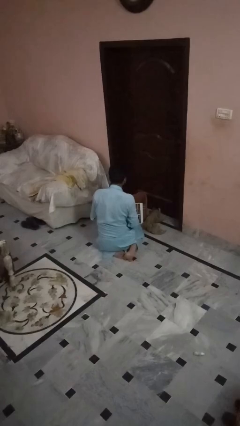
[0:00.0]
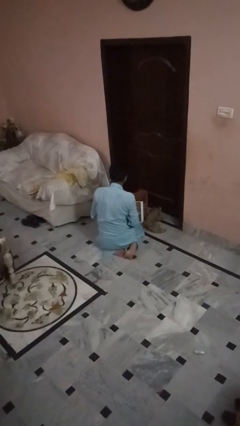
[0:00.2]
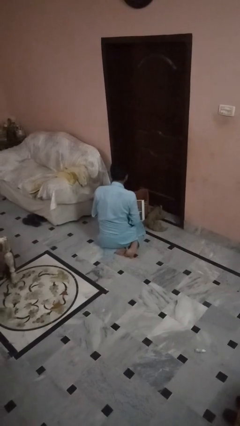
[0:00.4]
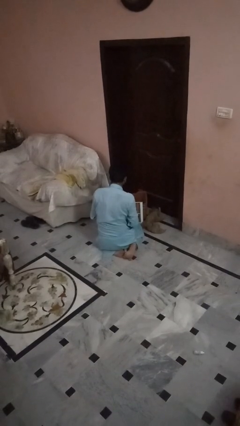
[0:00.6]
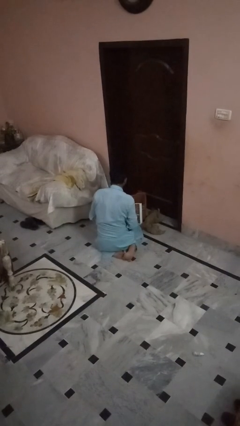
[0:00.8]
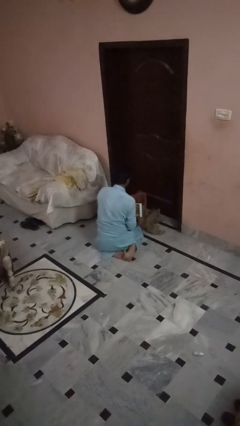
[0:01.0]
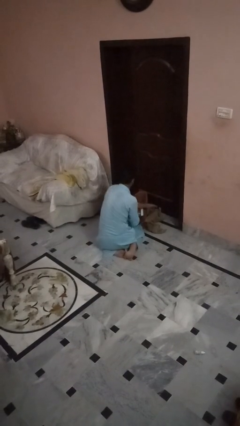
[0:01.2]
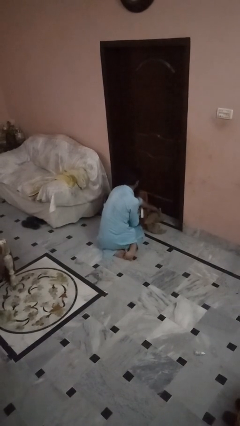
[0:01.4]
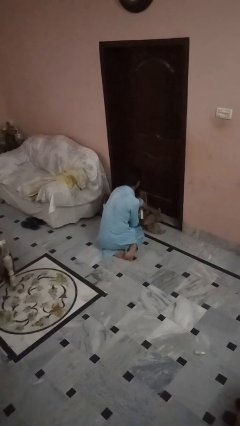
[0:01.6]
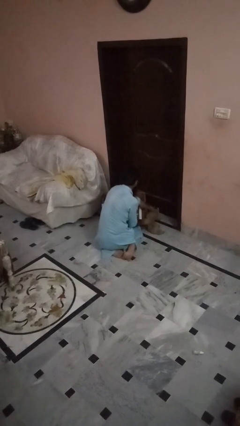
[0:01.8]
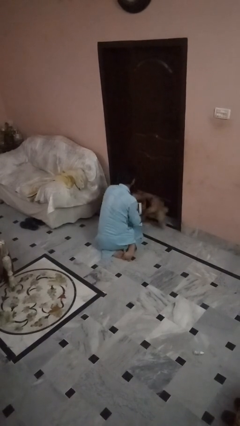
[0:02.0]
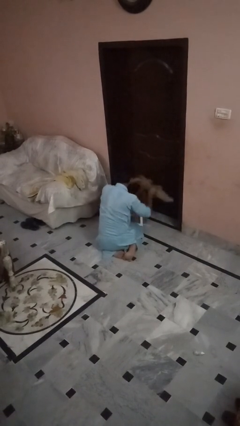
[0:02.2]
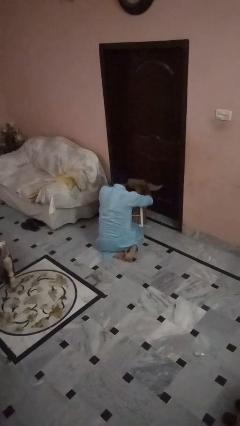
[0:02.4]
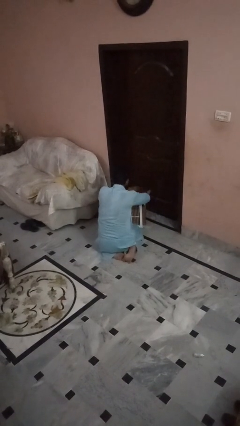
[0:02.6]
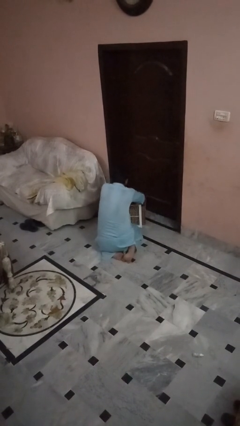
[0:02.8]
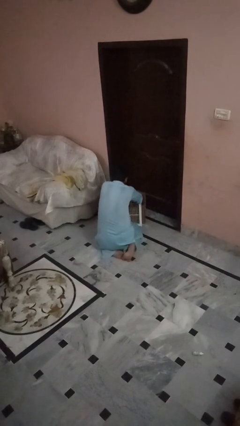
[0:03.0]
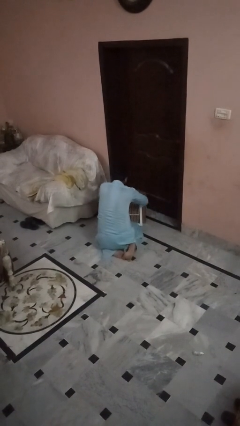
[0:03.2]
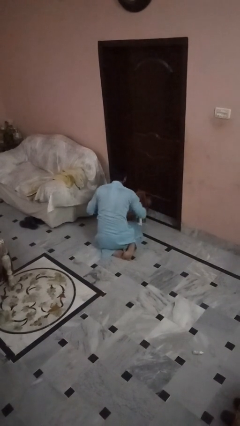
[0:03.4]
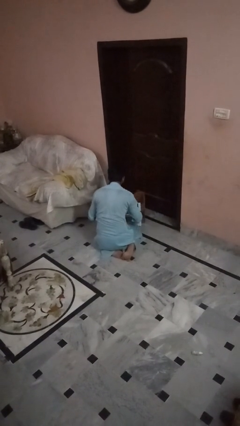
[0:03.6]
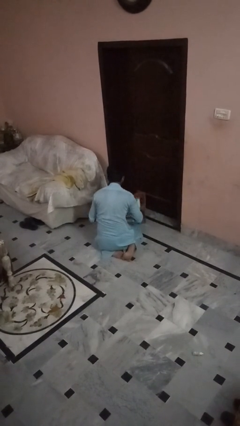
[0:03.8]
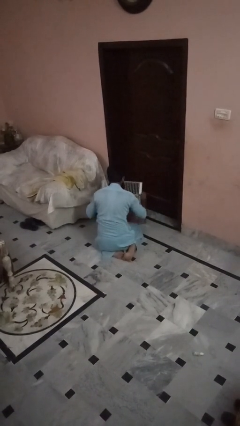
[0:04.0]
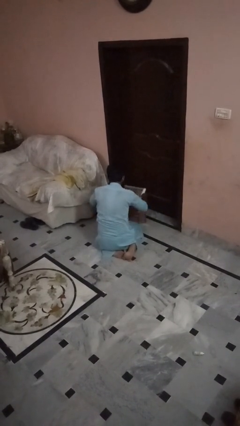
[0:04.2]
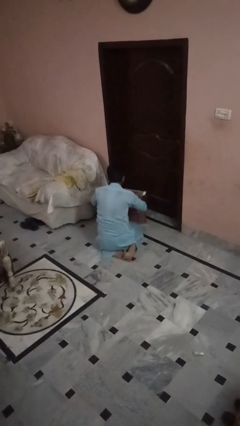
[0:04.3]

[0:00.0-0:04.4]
person crates dog

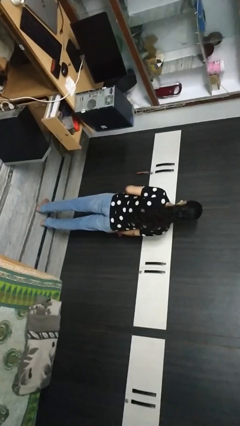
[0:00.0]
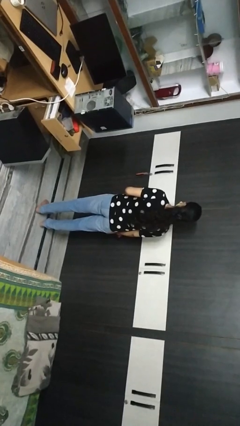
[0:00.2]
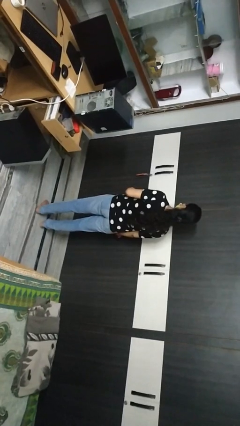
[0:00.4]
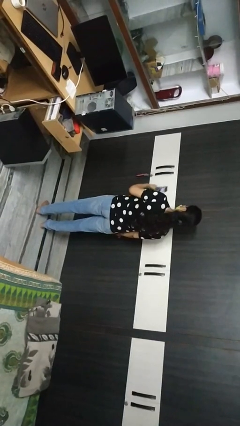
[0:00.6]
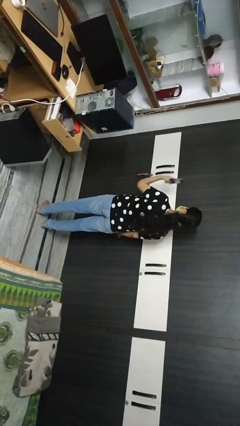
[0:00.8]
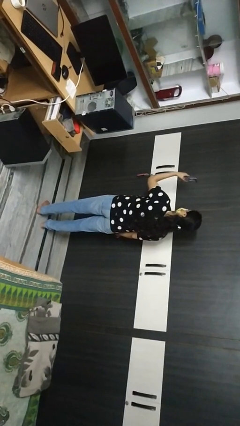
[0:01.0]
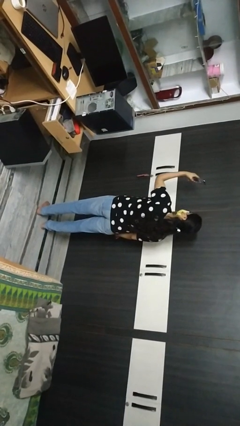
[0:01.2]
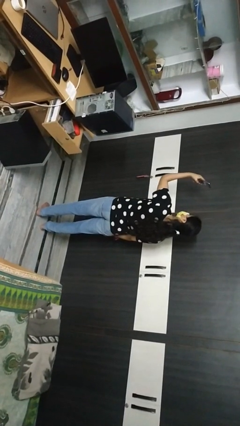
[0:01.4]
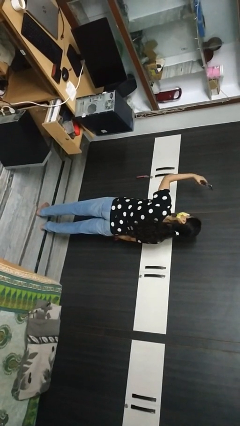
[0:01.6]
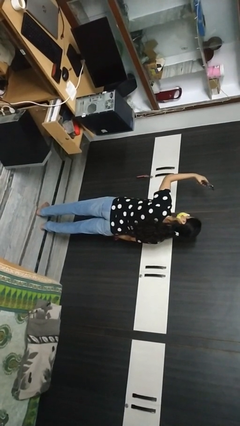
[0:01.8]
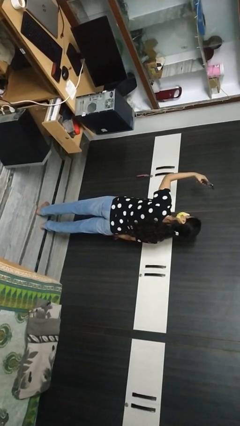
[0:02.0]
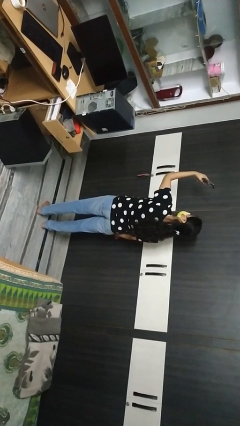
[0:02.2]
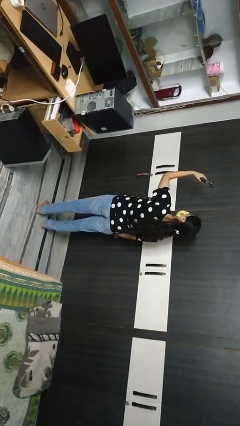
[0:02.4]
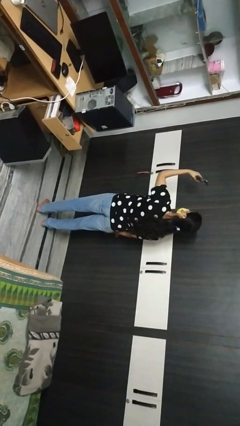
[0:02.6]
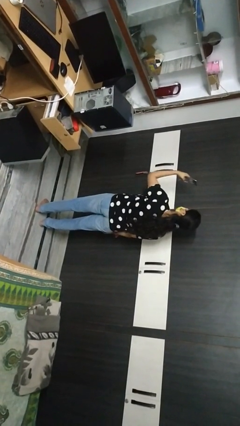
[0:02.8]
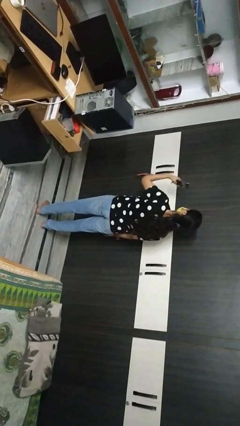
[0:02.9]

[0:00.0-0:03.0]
person takes selfie

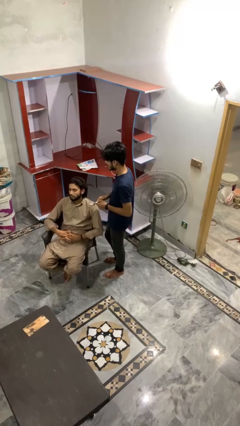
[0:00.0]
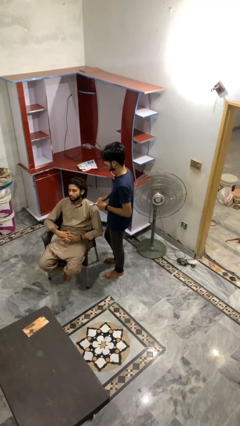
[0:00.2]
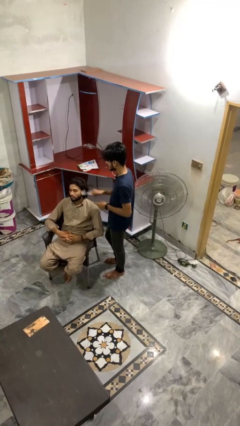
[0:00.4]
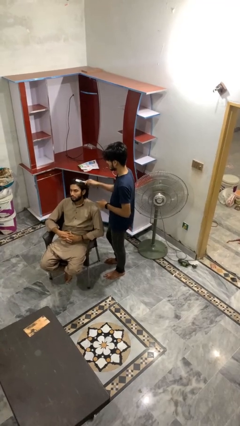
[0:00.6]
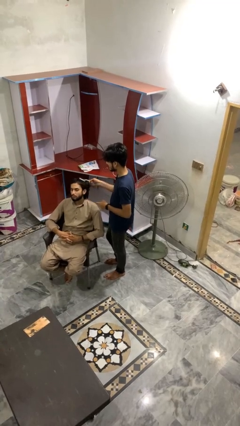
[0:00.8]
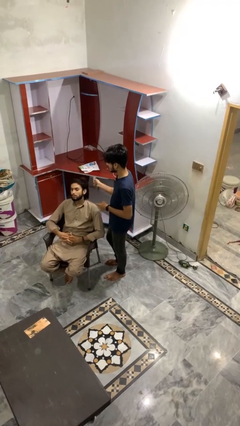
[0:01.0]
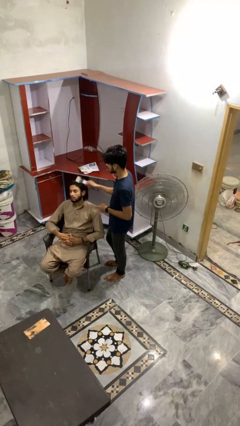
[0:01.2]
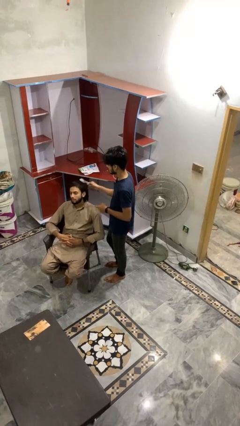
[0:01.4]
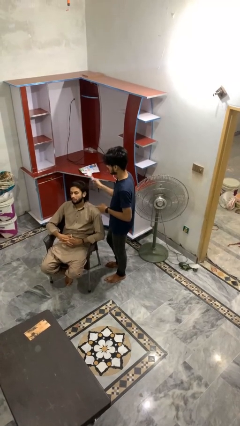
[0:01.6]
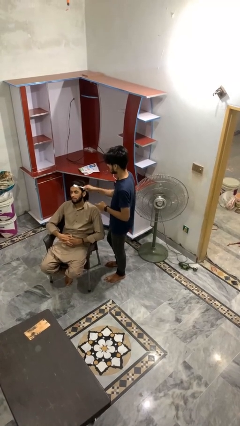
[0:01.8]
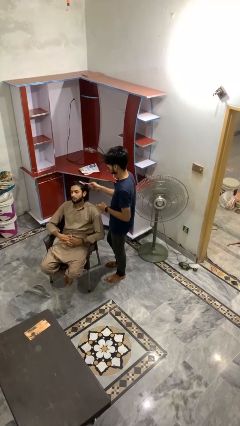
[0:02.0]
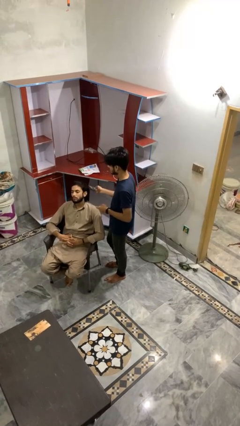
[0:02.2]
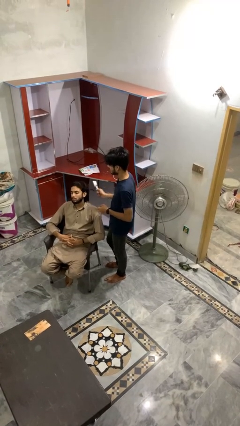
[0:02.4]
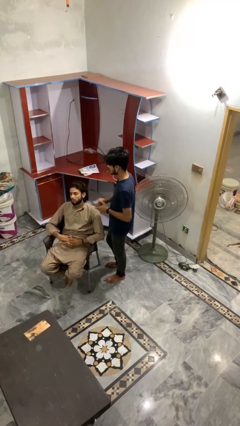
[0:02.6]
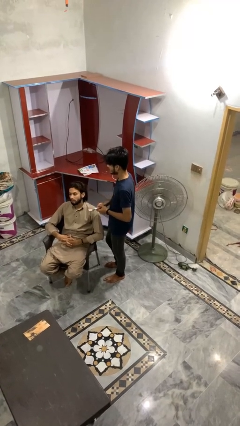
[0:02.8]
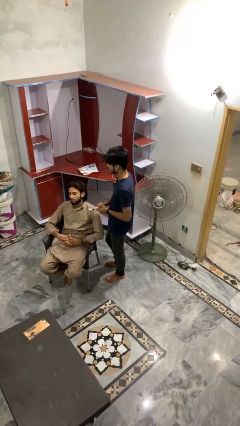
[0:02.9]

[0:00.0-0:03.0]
person brushes hair of person

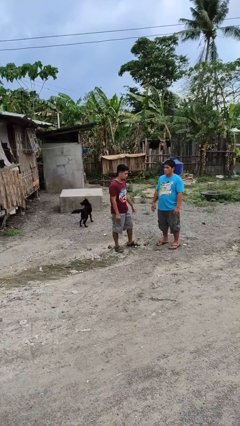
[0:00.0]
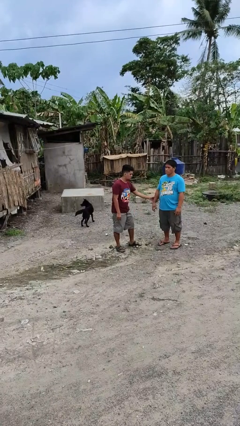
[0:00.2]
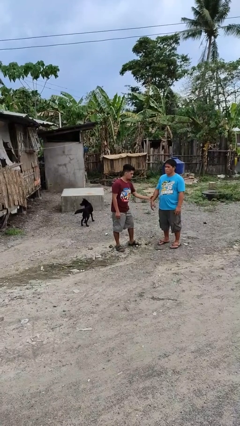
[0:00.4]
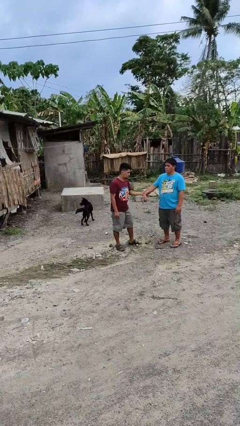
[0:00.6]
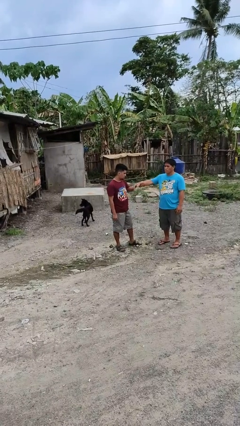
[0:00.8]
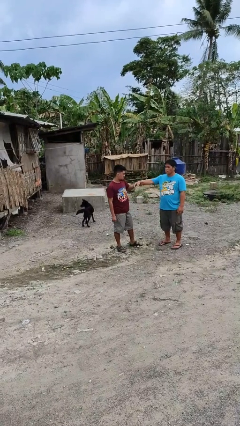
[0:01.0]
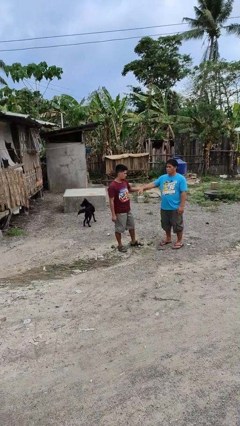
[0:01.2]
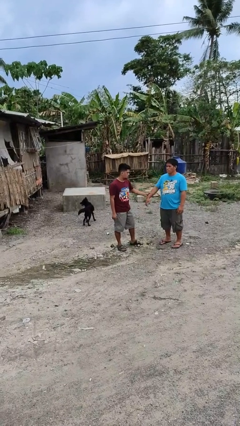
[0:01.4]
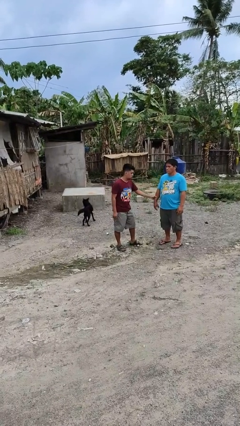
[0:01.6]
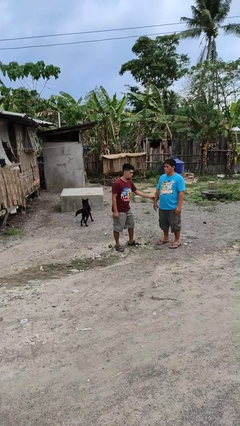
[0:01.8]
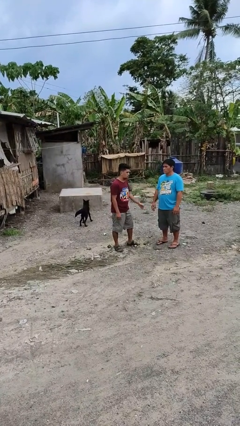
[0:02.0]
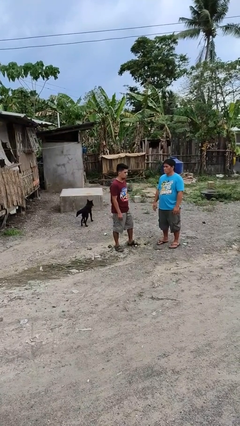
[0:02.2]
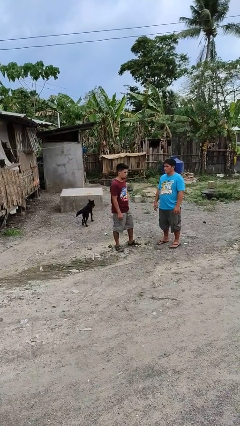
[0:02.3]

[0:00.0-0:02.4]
person grabs person by forearm

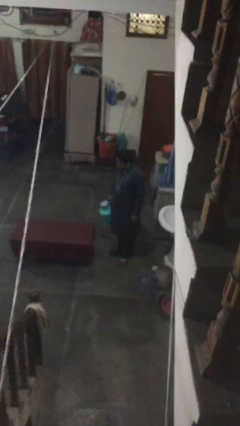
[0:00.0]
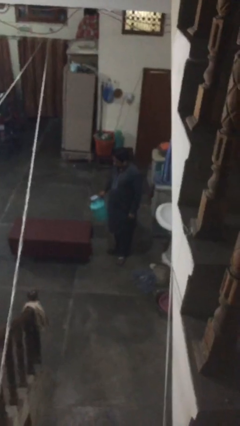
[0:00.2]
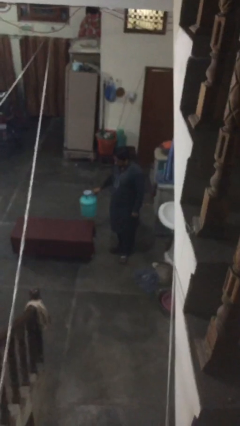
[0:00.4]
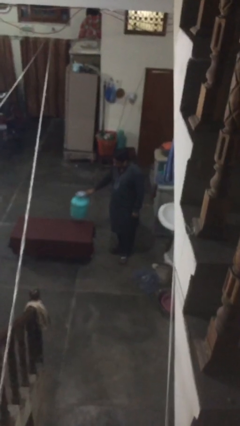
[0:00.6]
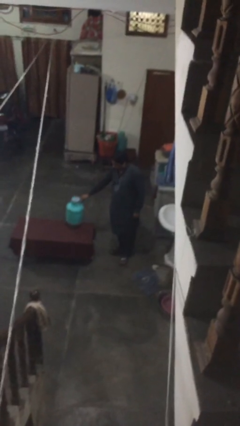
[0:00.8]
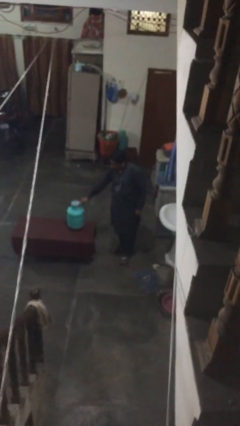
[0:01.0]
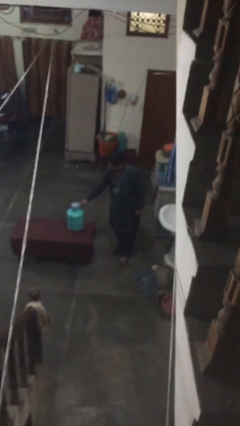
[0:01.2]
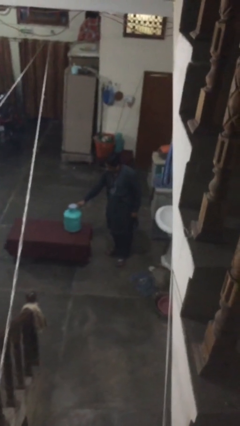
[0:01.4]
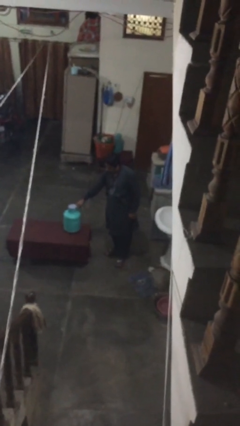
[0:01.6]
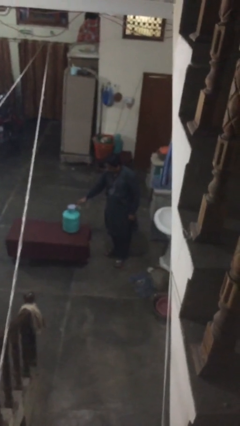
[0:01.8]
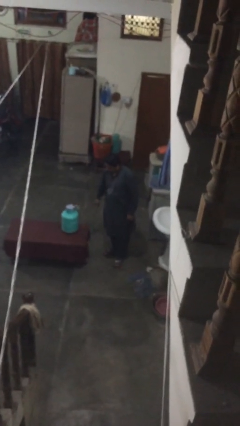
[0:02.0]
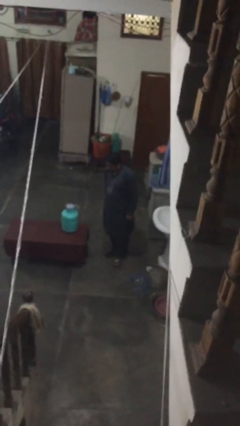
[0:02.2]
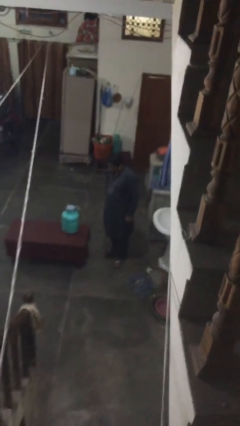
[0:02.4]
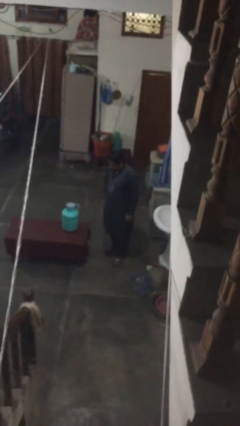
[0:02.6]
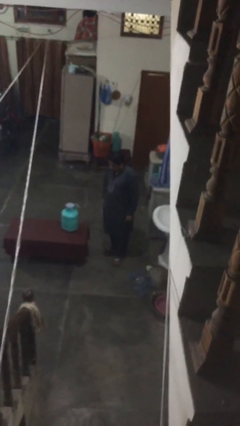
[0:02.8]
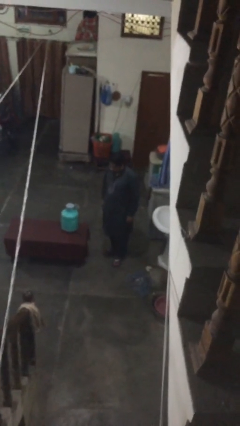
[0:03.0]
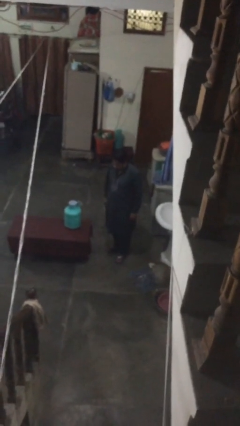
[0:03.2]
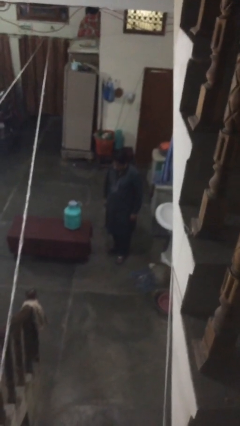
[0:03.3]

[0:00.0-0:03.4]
person puts down object on table

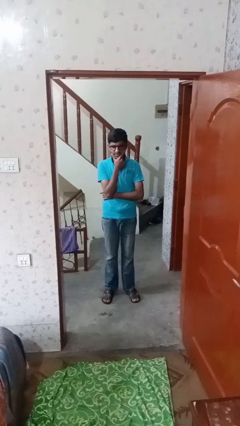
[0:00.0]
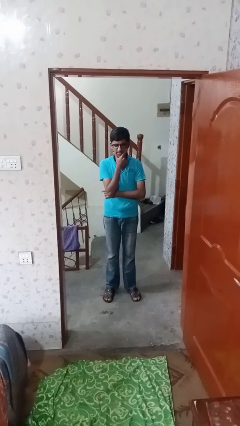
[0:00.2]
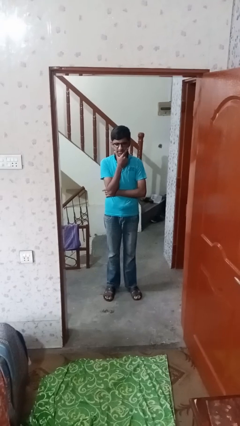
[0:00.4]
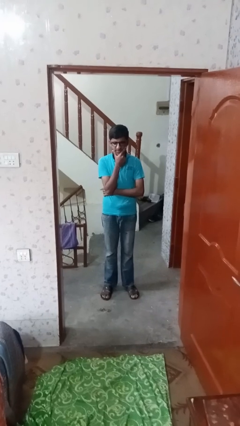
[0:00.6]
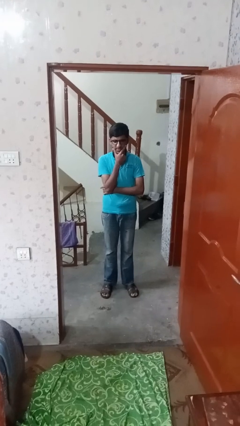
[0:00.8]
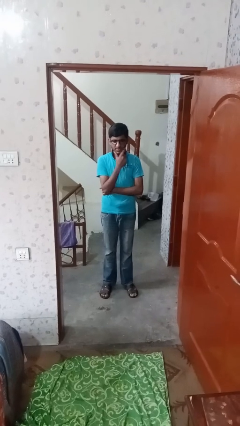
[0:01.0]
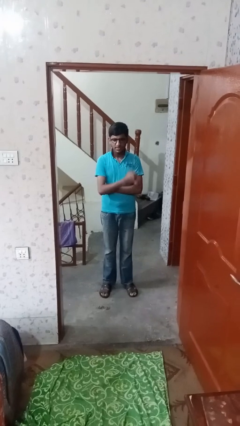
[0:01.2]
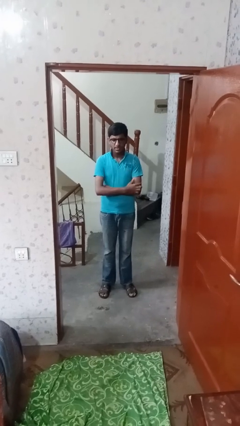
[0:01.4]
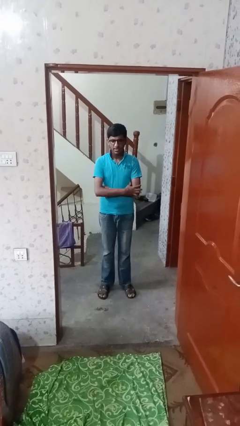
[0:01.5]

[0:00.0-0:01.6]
person strokes chin
